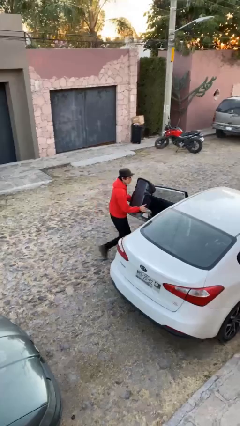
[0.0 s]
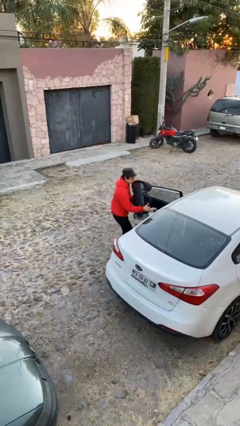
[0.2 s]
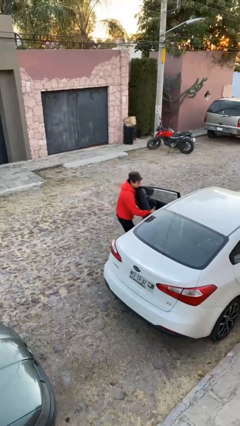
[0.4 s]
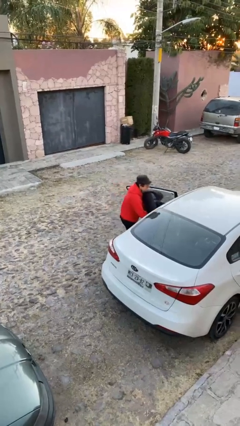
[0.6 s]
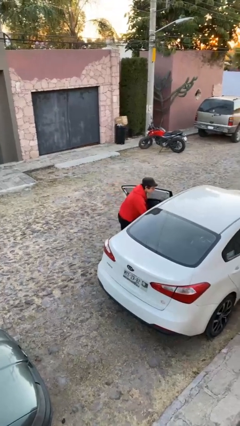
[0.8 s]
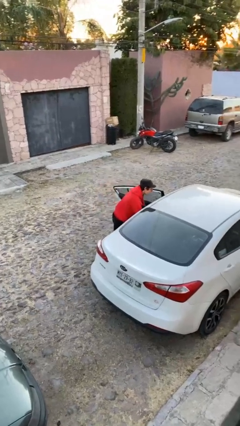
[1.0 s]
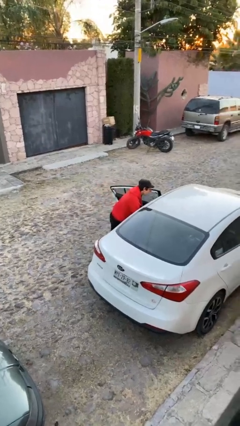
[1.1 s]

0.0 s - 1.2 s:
person loads car

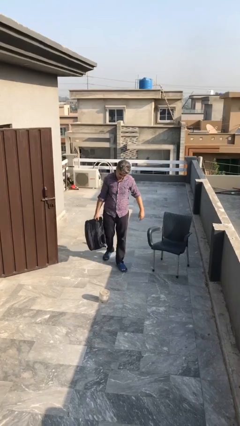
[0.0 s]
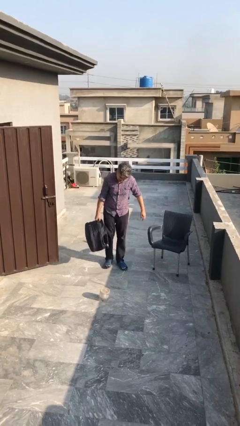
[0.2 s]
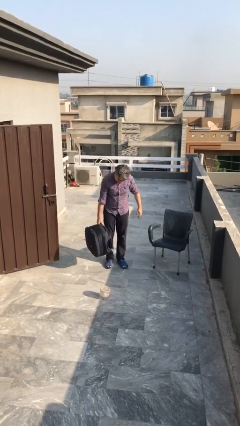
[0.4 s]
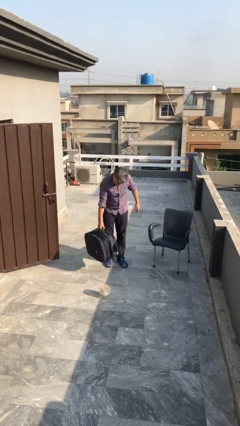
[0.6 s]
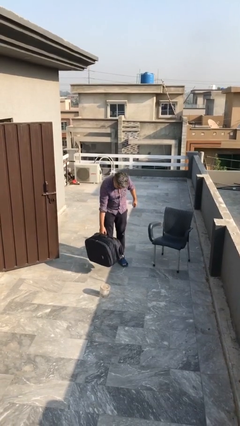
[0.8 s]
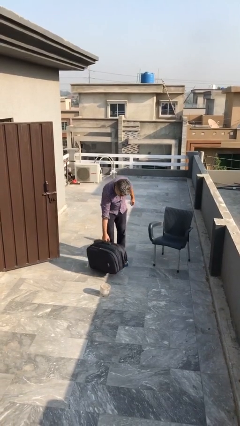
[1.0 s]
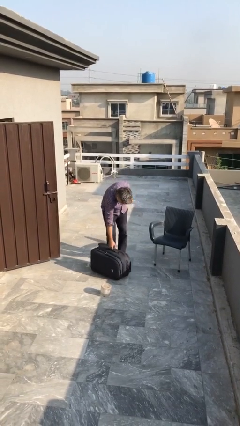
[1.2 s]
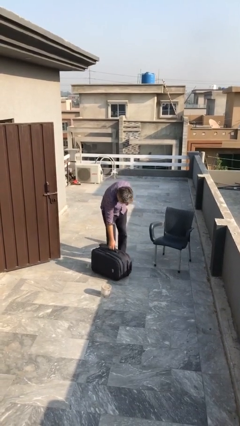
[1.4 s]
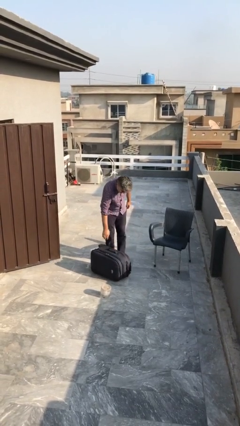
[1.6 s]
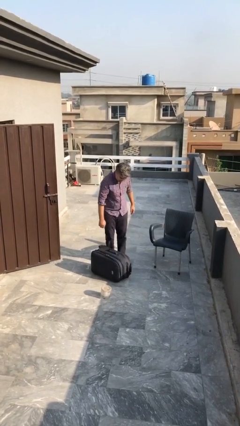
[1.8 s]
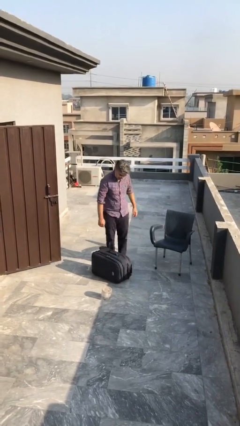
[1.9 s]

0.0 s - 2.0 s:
person puts down object on floor

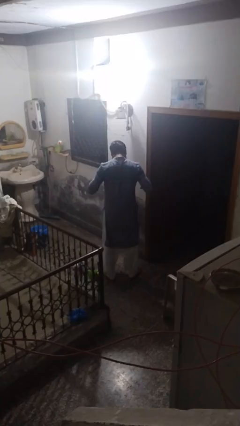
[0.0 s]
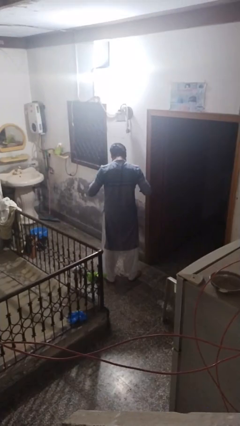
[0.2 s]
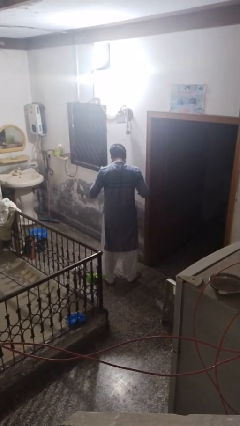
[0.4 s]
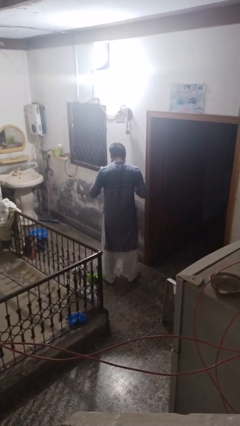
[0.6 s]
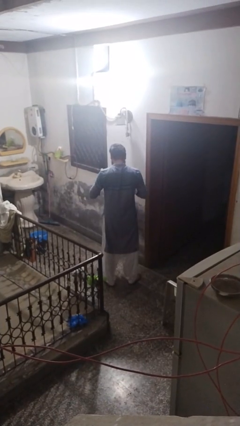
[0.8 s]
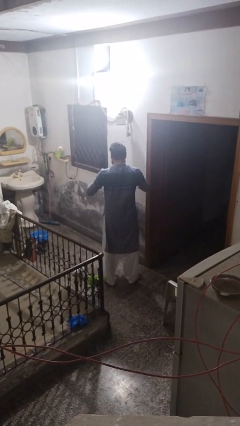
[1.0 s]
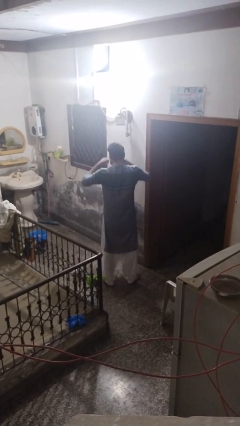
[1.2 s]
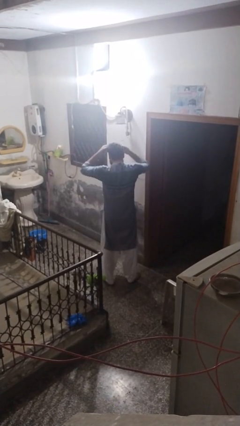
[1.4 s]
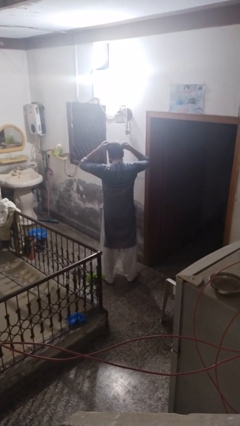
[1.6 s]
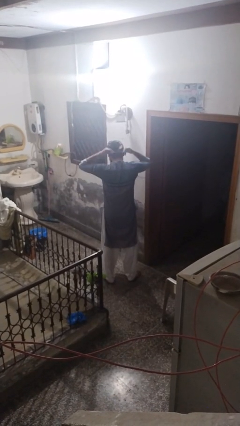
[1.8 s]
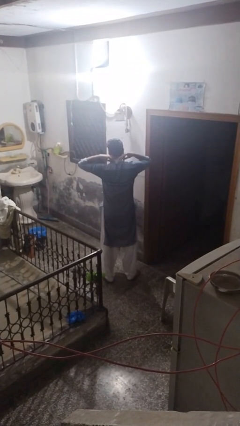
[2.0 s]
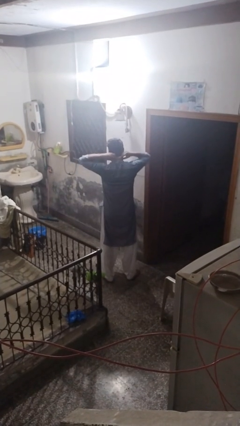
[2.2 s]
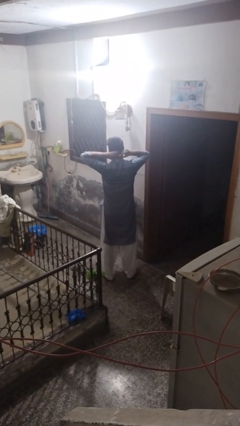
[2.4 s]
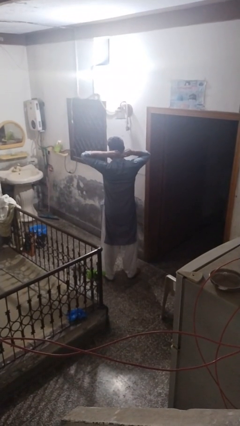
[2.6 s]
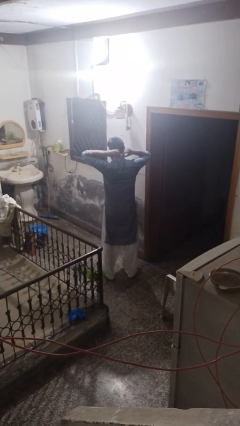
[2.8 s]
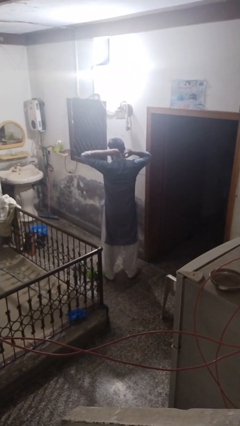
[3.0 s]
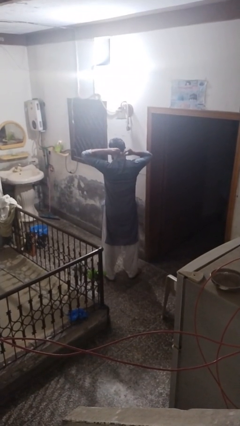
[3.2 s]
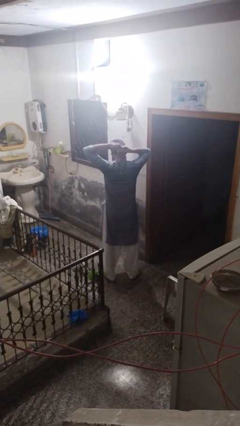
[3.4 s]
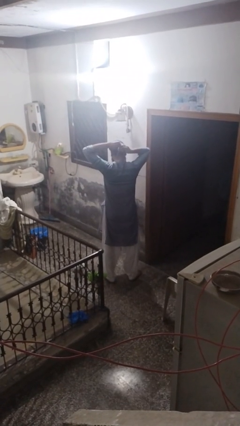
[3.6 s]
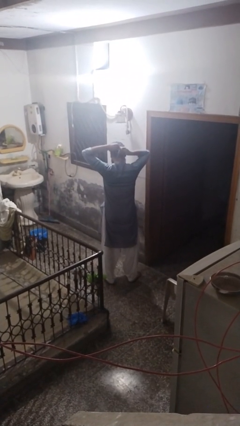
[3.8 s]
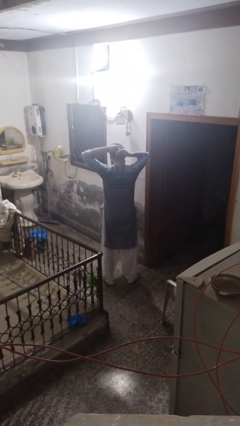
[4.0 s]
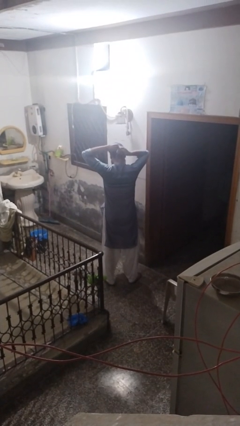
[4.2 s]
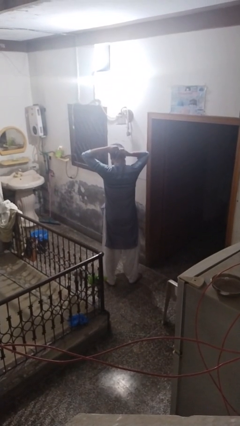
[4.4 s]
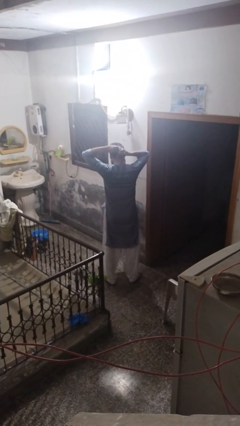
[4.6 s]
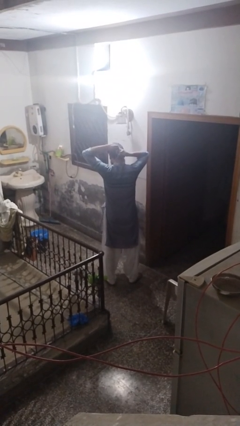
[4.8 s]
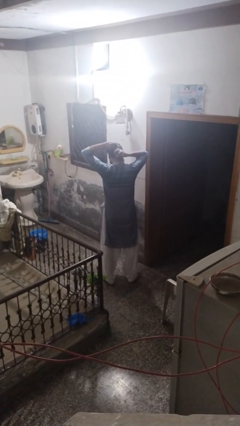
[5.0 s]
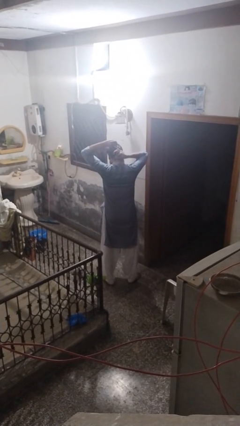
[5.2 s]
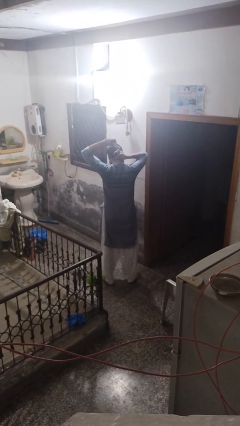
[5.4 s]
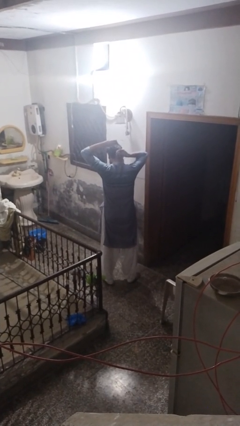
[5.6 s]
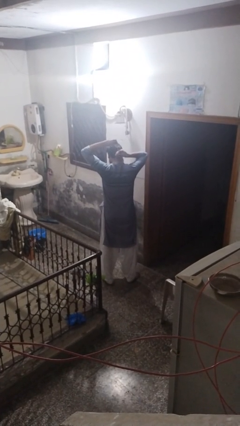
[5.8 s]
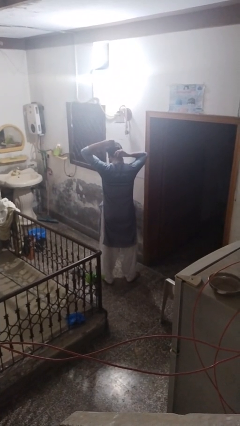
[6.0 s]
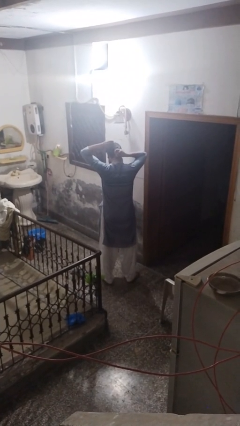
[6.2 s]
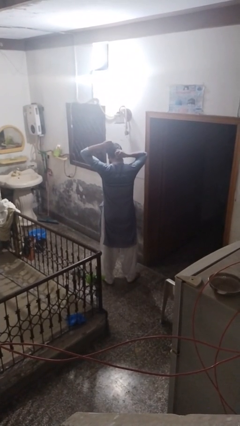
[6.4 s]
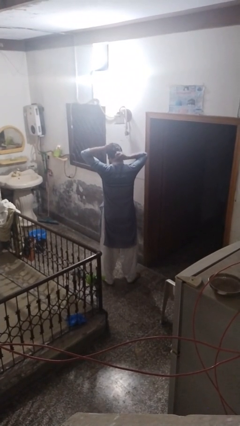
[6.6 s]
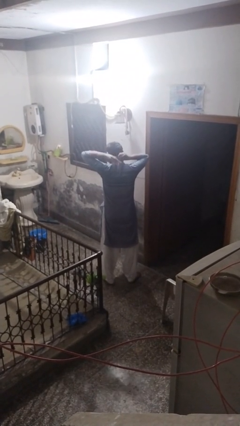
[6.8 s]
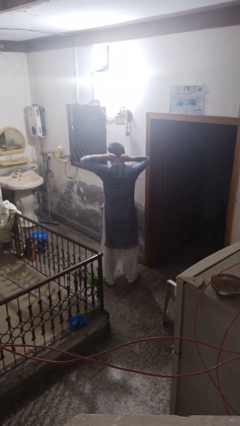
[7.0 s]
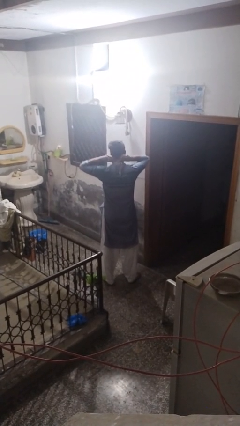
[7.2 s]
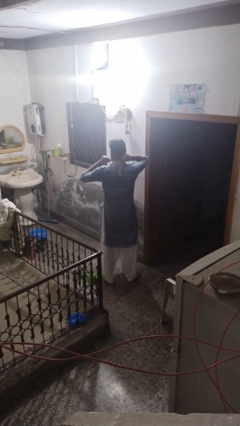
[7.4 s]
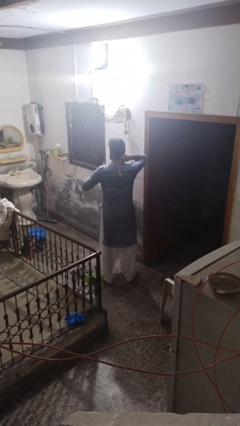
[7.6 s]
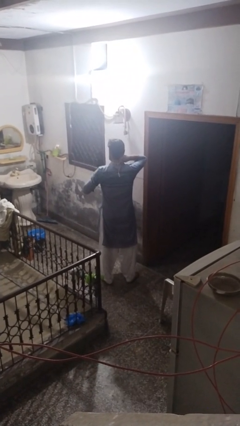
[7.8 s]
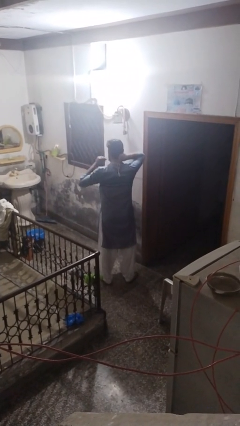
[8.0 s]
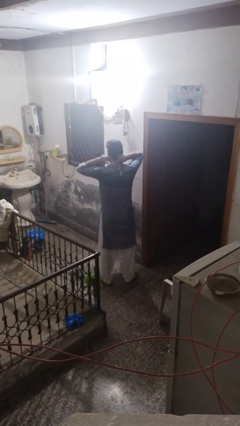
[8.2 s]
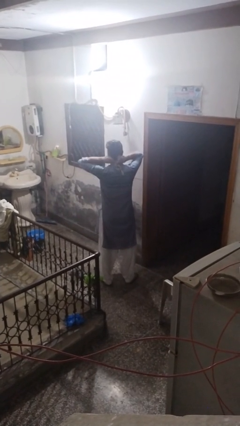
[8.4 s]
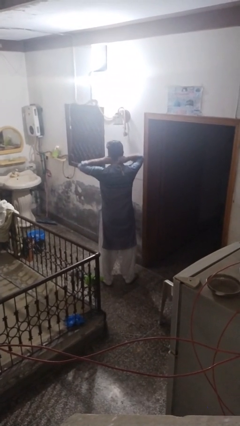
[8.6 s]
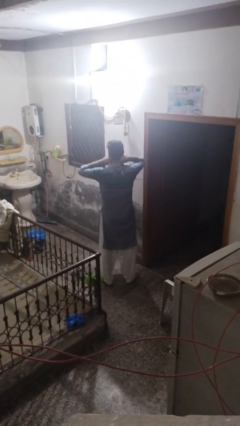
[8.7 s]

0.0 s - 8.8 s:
person puts on necklace

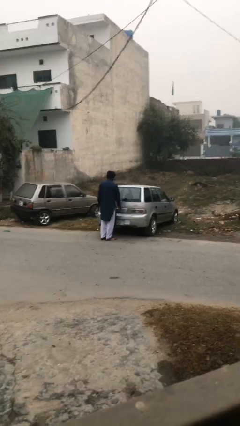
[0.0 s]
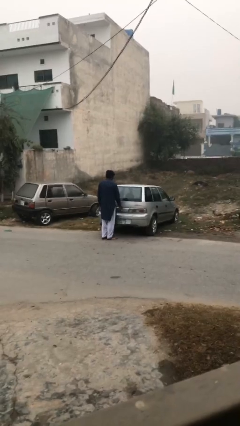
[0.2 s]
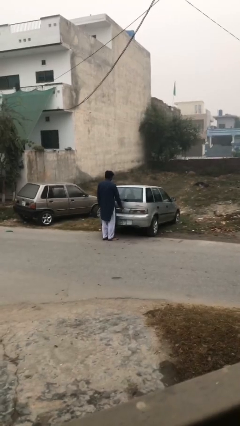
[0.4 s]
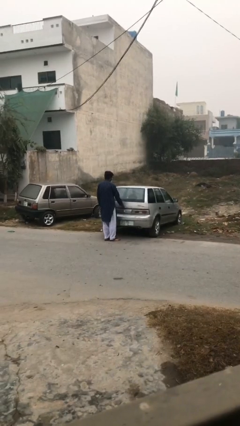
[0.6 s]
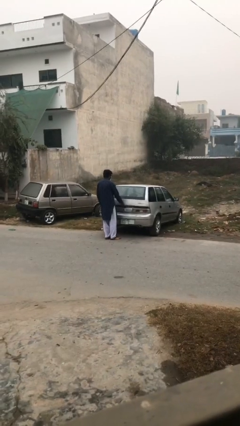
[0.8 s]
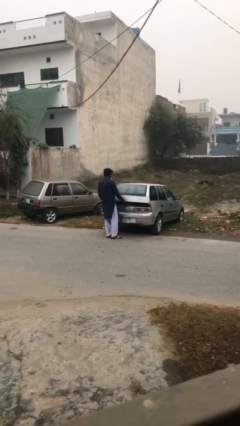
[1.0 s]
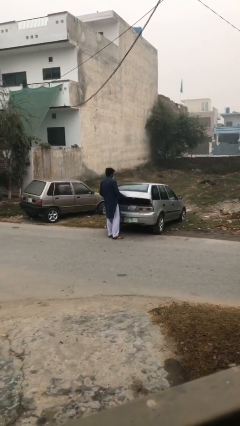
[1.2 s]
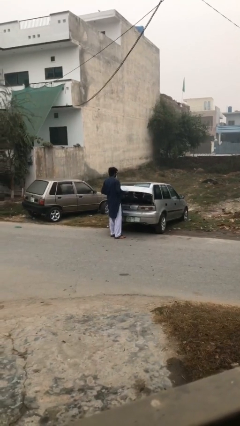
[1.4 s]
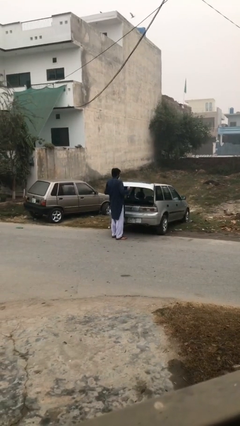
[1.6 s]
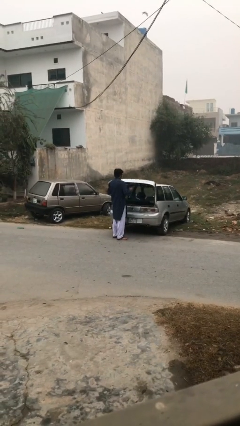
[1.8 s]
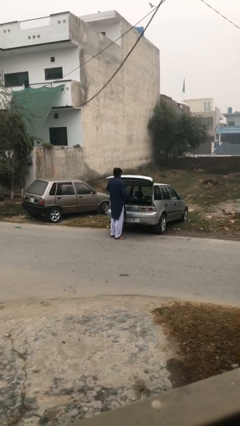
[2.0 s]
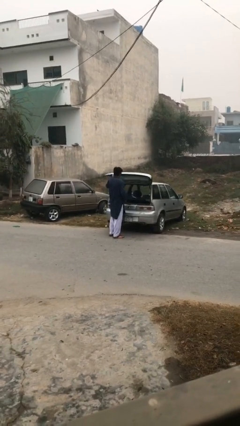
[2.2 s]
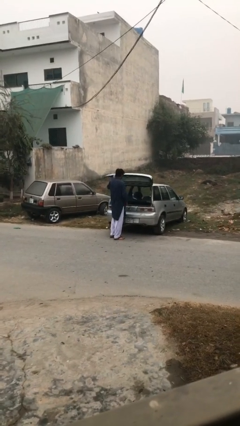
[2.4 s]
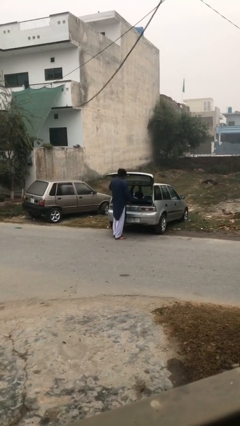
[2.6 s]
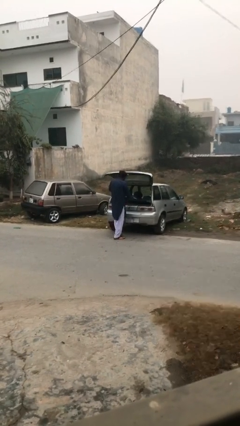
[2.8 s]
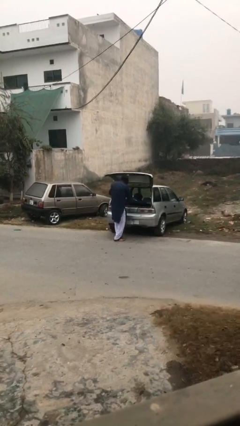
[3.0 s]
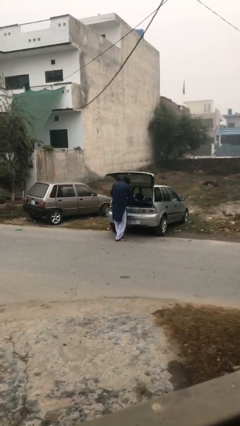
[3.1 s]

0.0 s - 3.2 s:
person opens car trunk

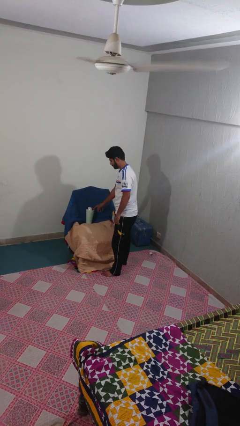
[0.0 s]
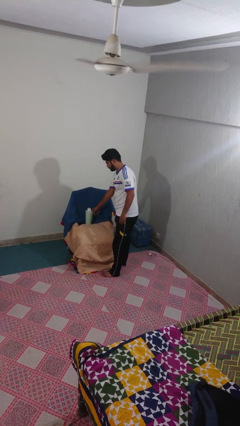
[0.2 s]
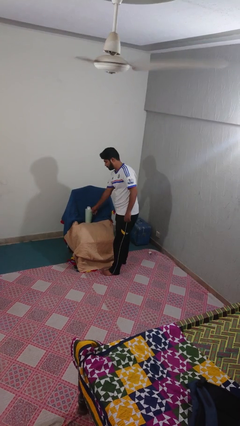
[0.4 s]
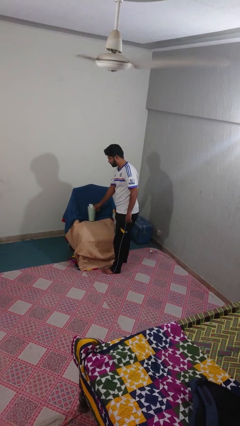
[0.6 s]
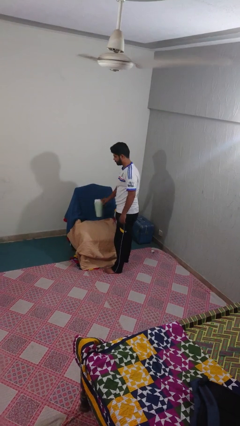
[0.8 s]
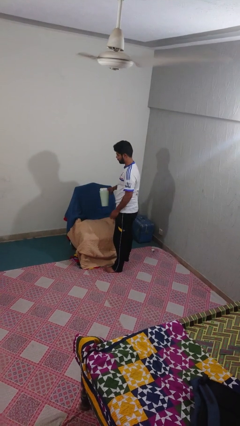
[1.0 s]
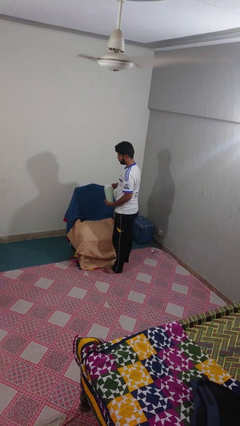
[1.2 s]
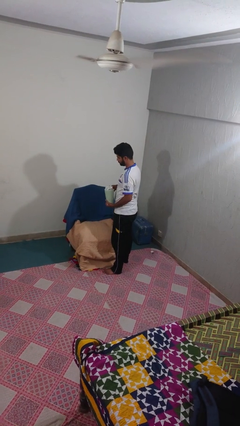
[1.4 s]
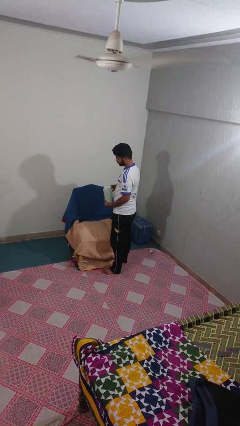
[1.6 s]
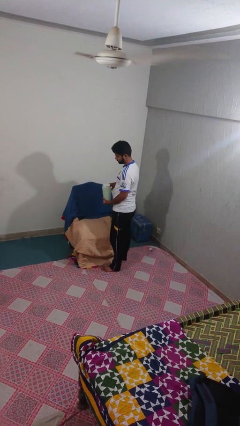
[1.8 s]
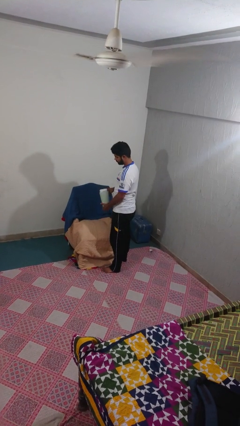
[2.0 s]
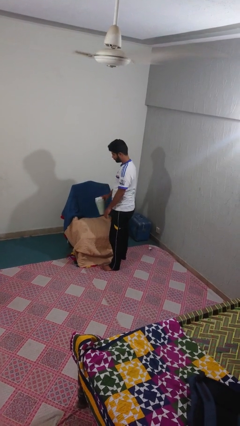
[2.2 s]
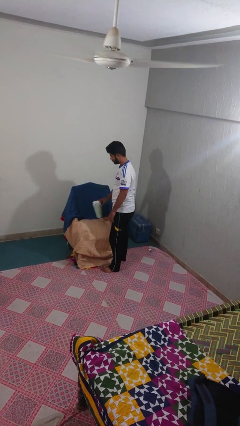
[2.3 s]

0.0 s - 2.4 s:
person picks up object from couch

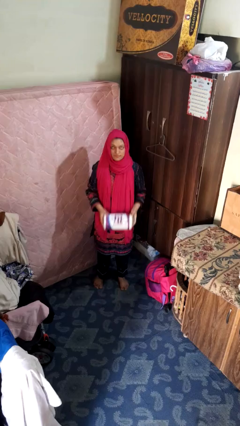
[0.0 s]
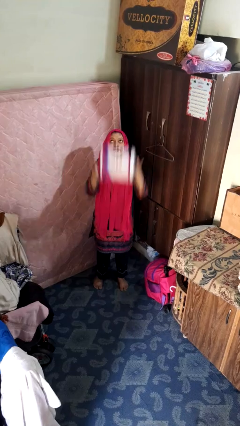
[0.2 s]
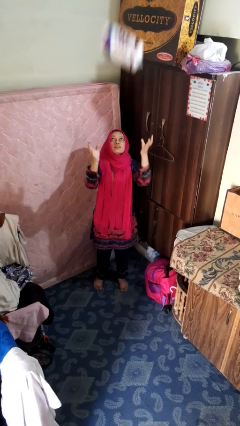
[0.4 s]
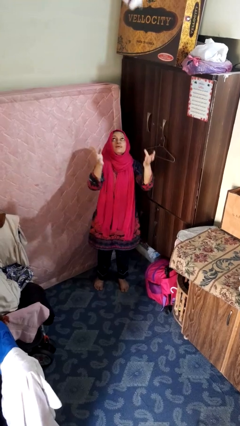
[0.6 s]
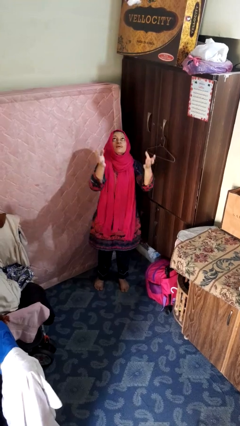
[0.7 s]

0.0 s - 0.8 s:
person drops object
